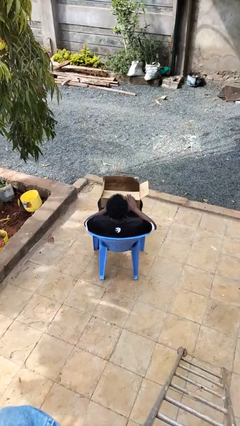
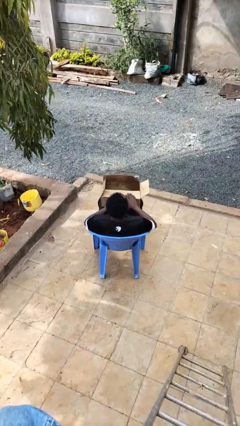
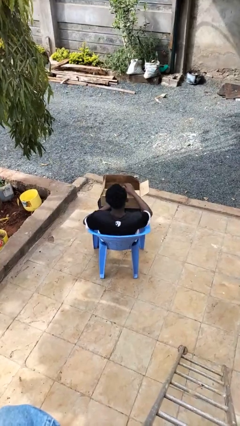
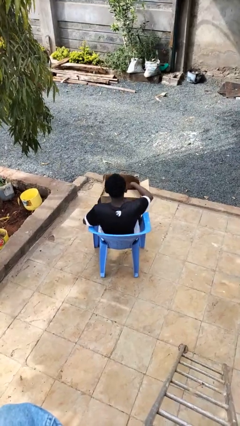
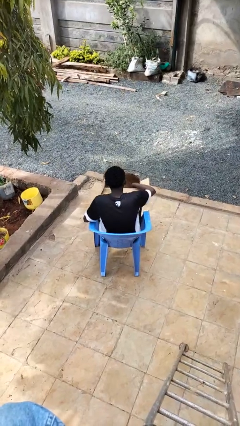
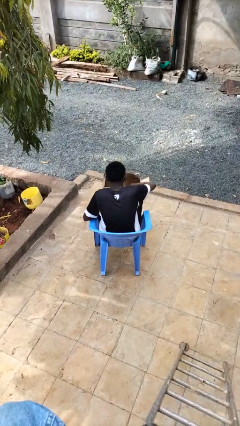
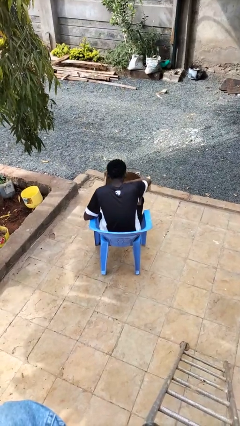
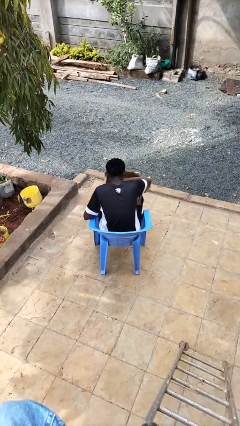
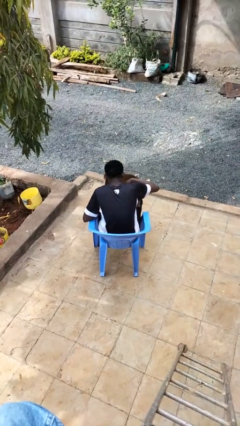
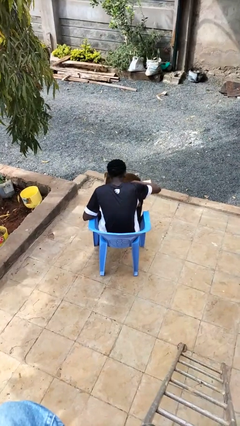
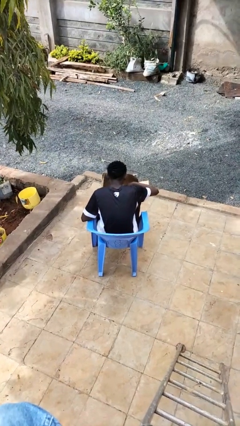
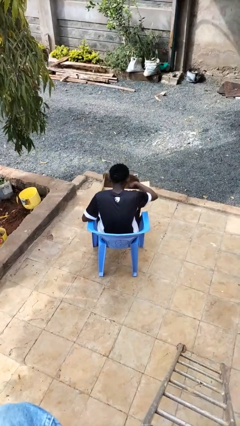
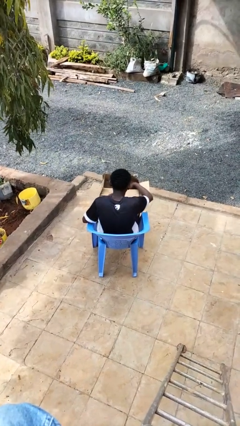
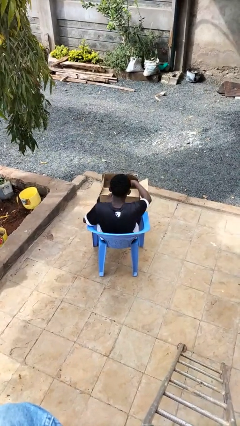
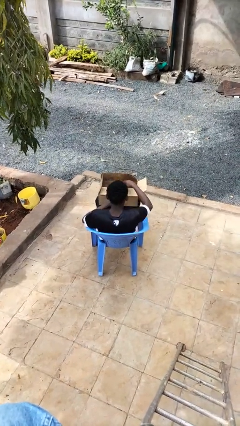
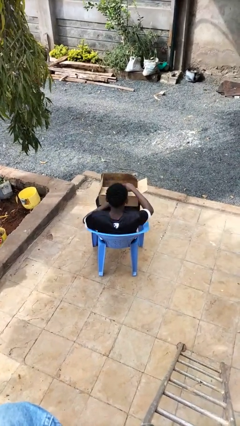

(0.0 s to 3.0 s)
person searches in box

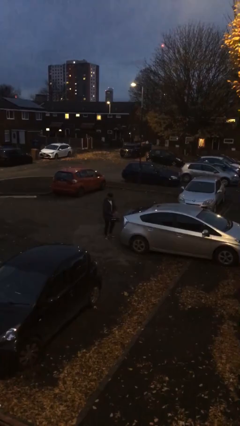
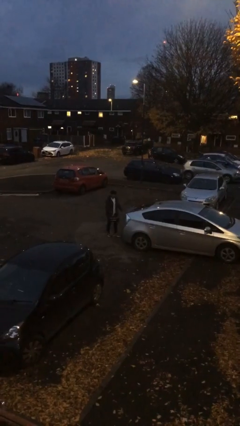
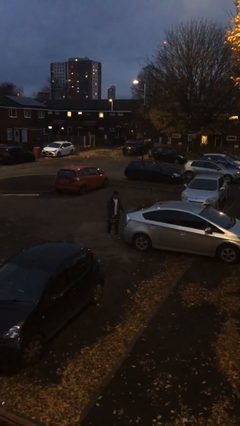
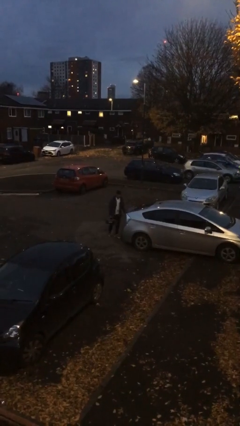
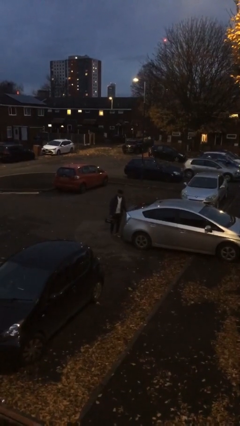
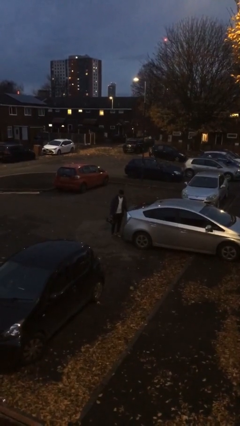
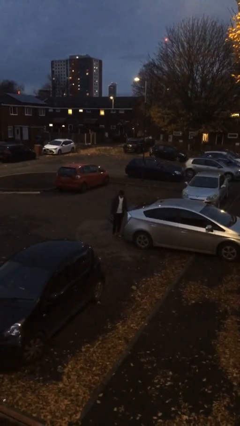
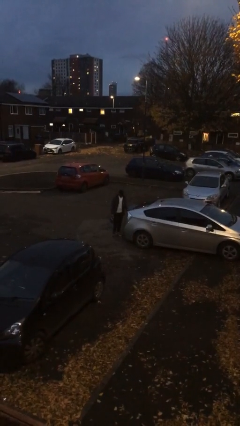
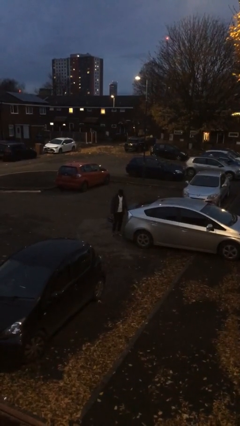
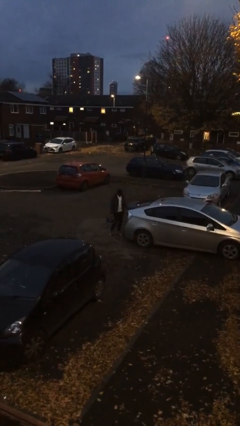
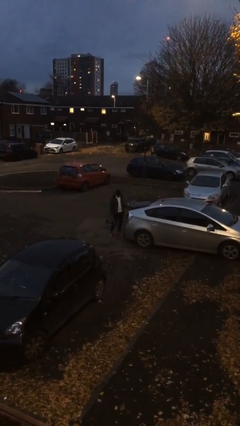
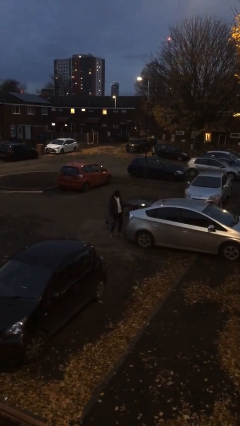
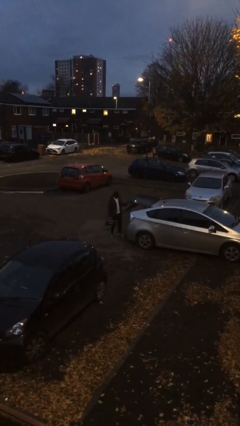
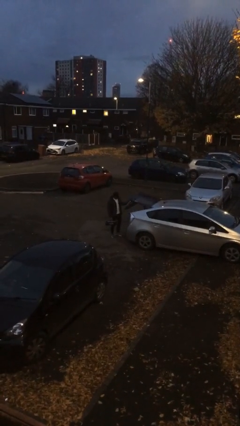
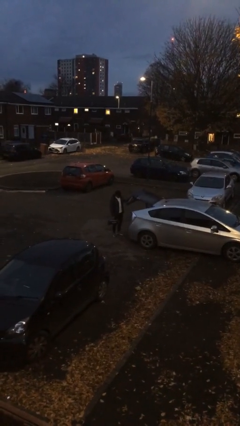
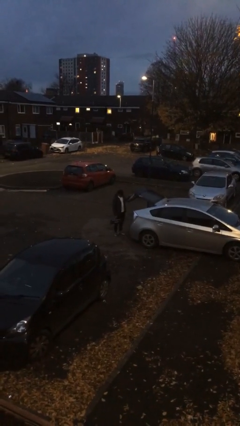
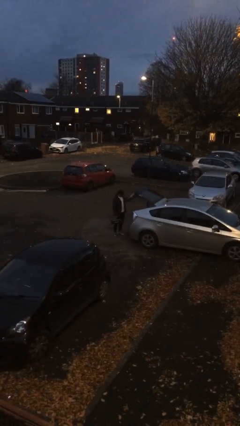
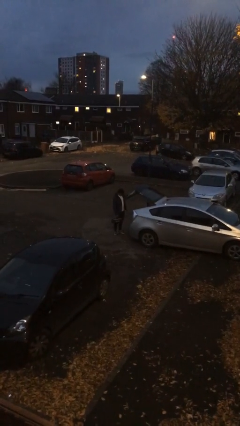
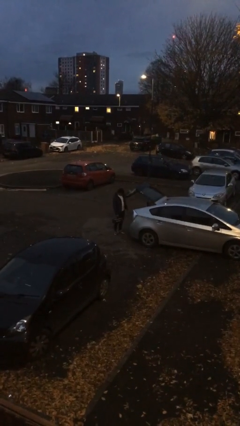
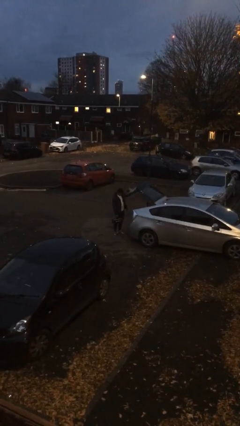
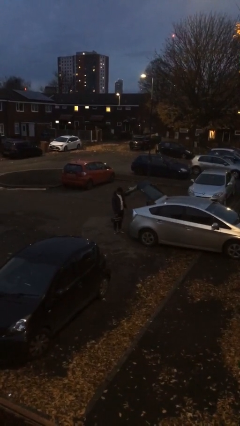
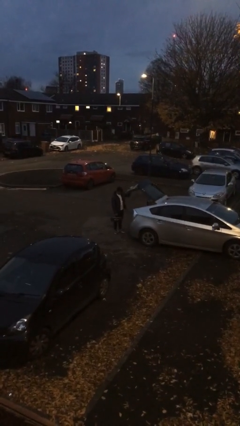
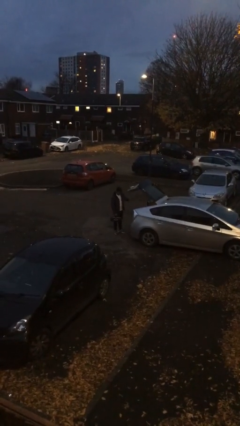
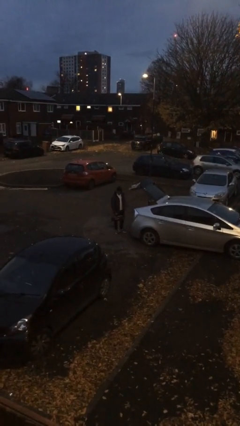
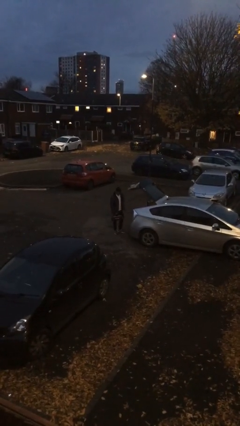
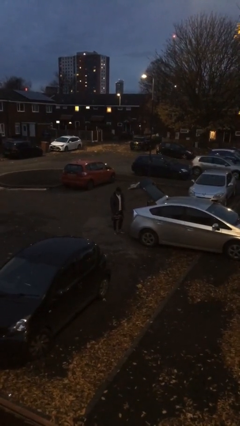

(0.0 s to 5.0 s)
person opens car trunk

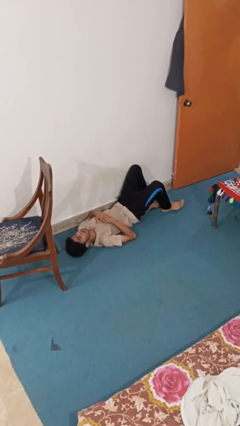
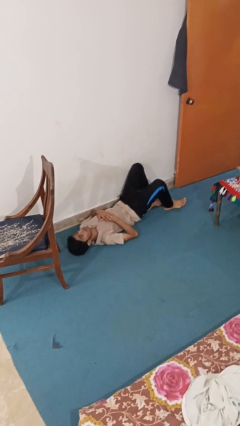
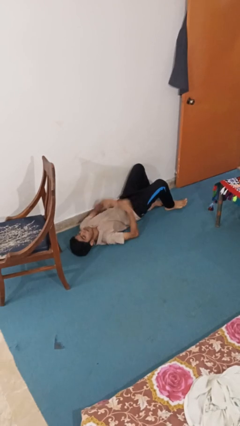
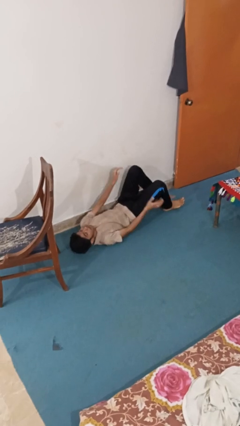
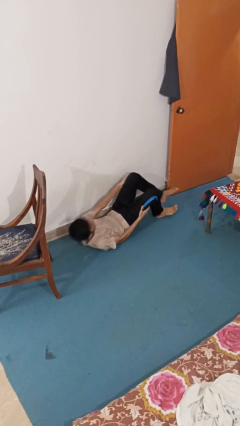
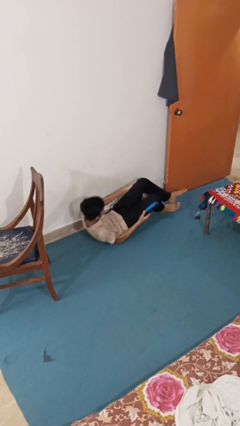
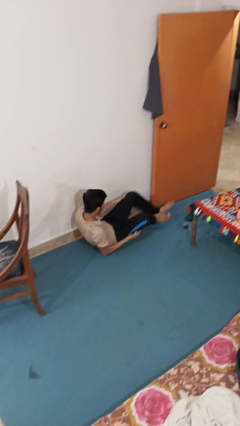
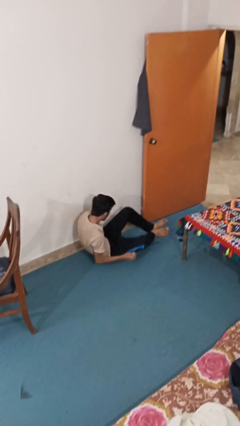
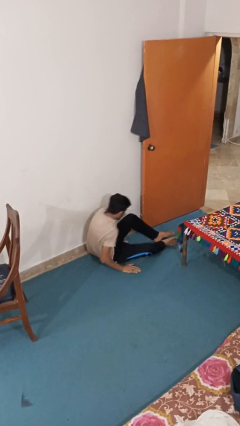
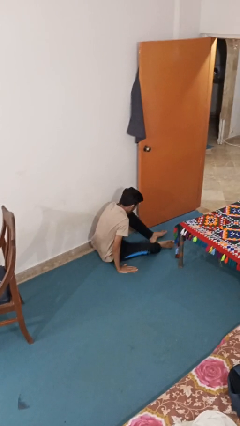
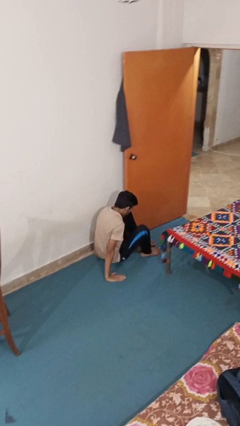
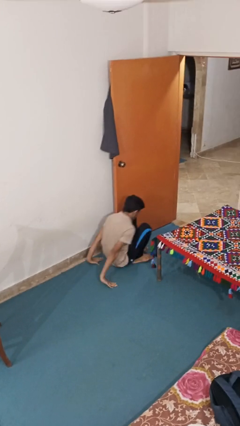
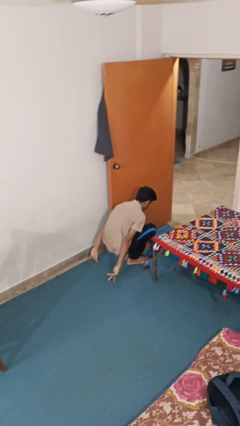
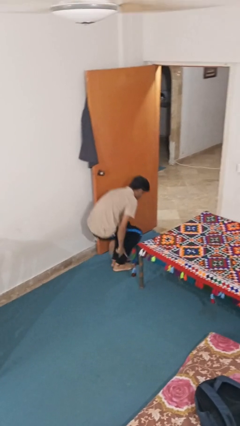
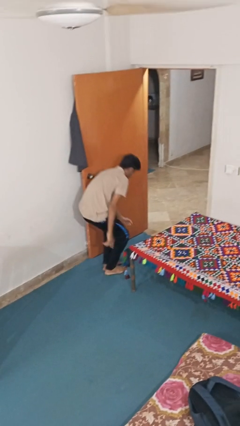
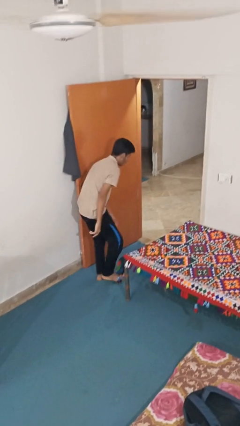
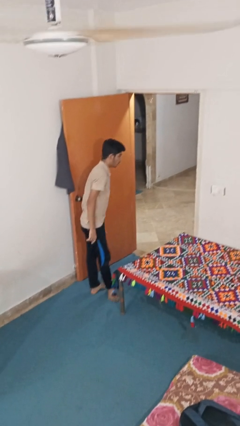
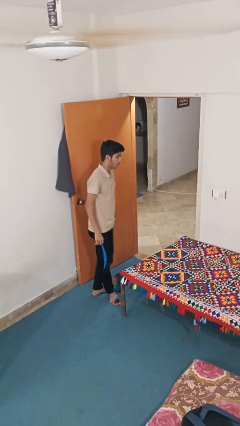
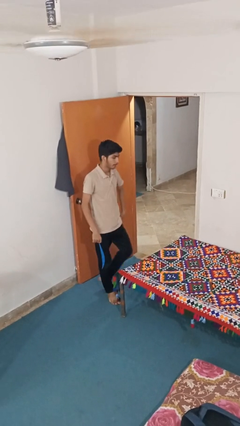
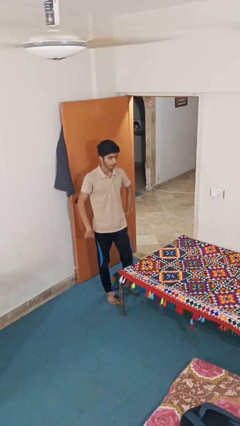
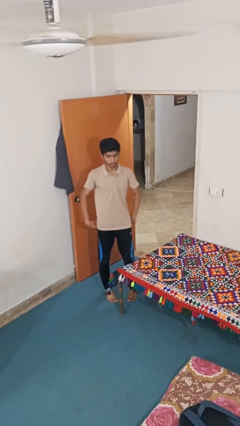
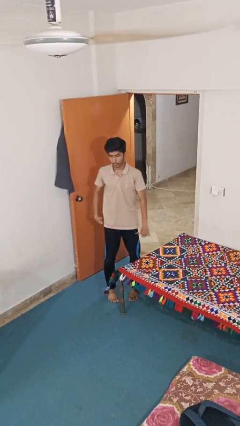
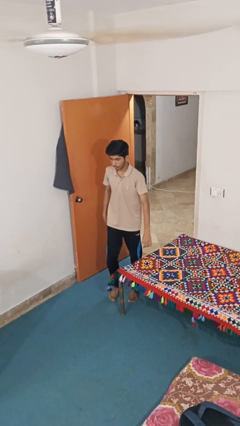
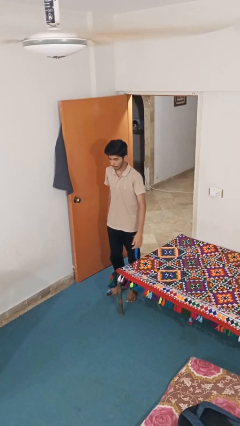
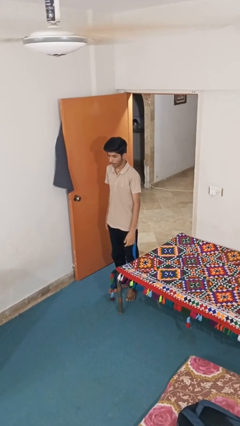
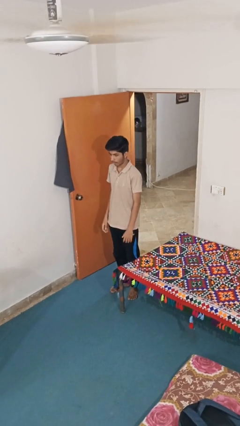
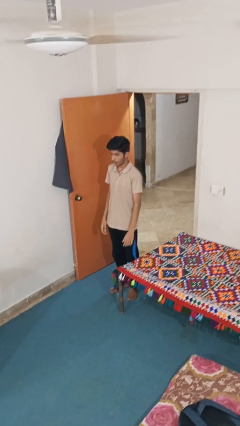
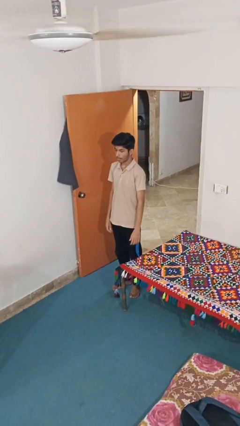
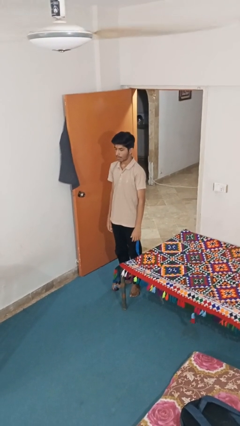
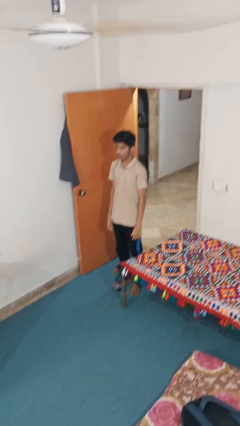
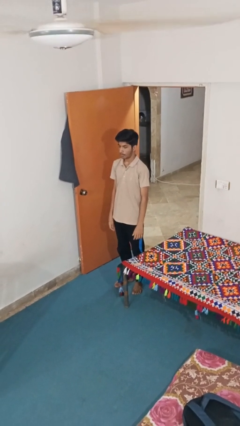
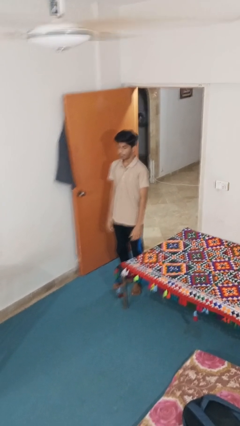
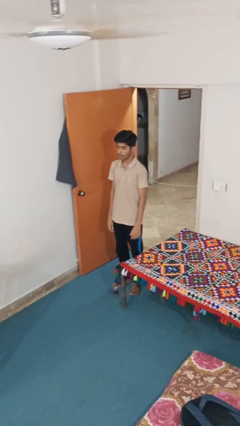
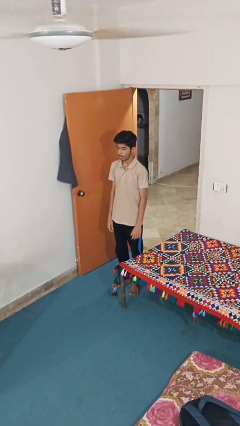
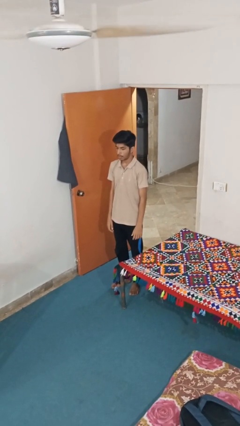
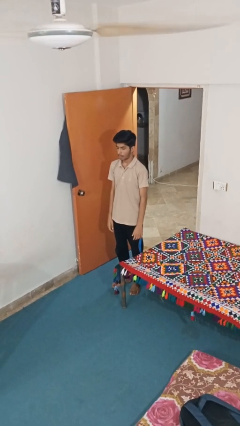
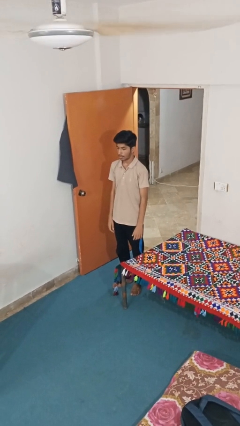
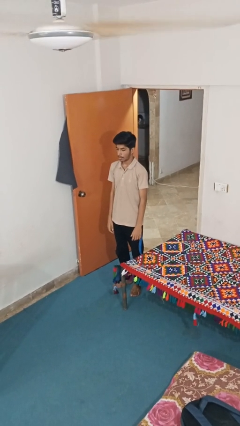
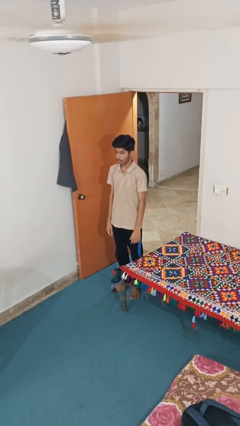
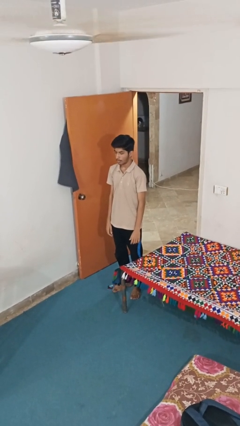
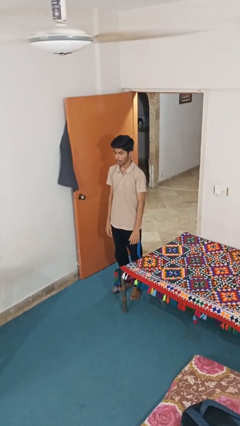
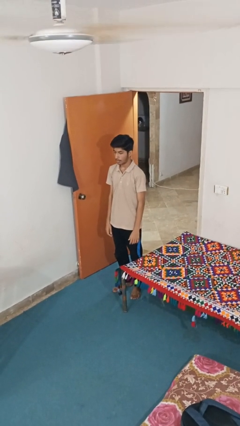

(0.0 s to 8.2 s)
person stands up from floor

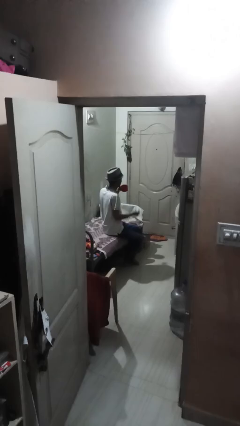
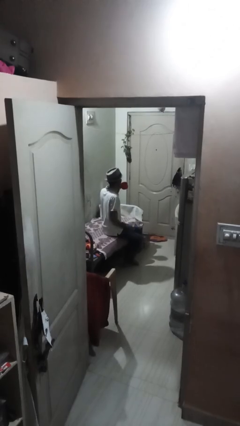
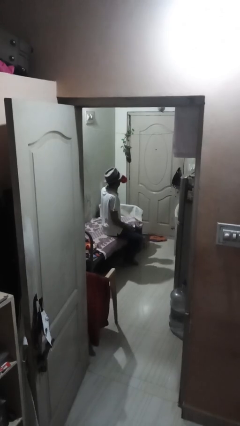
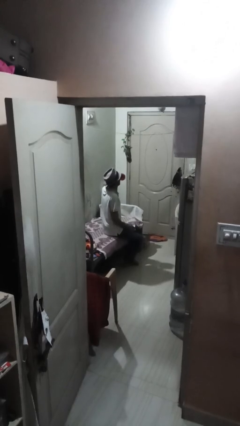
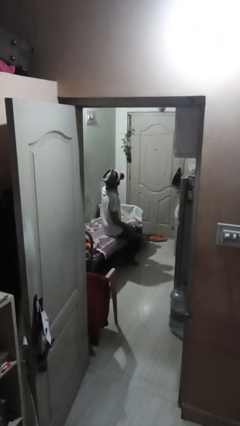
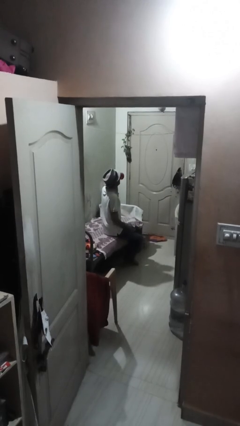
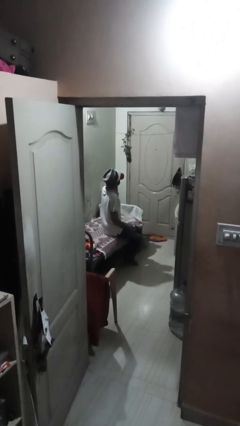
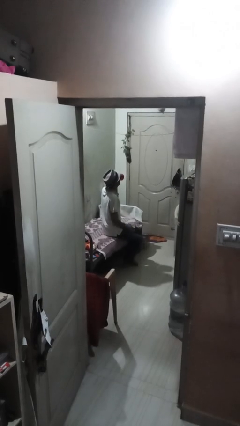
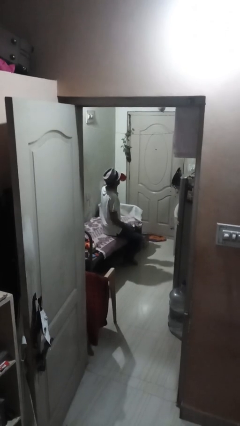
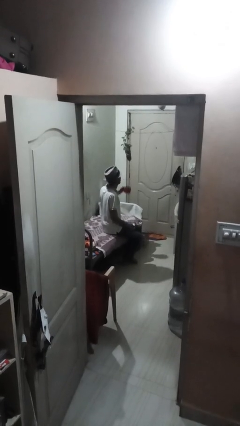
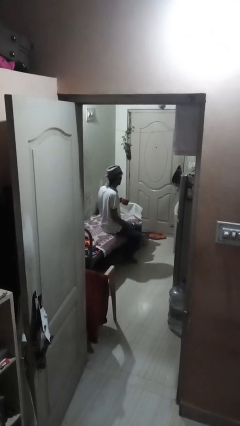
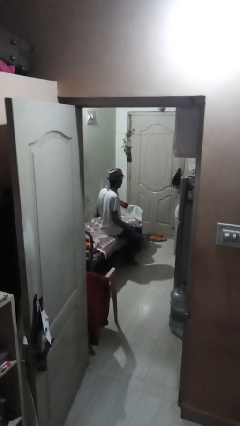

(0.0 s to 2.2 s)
person drinks from mug
